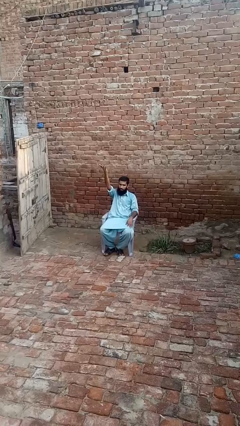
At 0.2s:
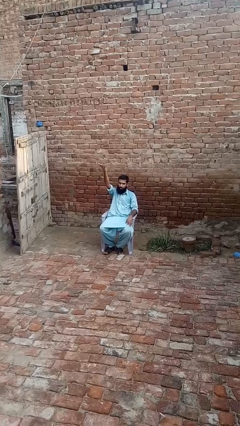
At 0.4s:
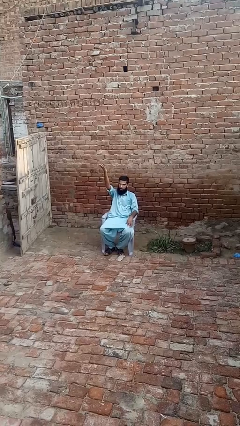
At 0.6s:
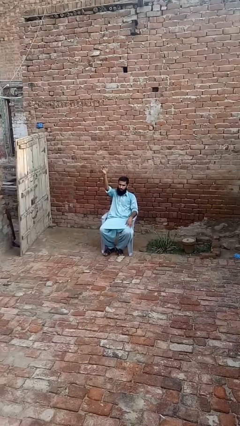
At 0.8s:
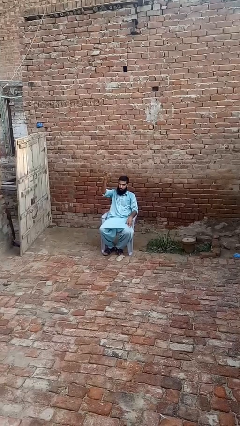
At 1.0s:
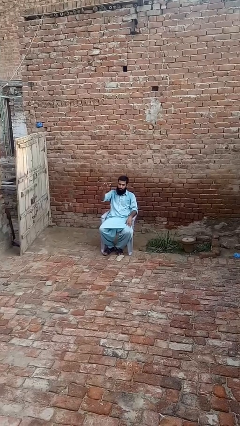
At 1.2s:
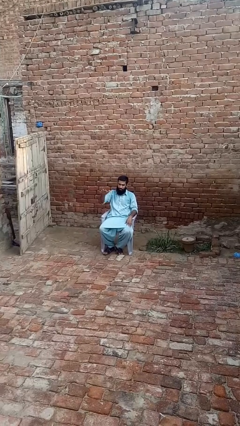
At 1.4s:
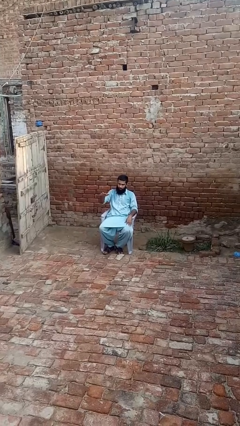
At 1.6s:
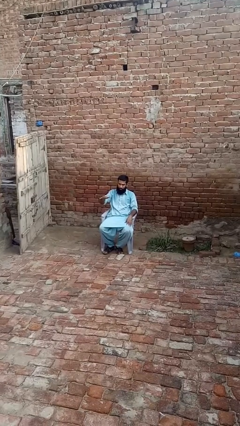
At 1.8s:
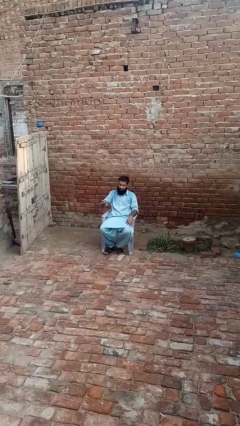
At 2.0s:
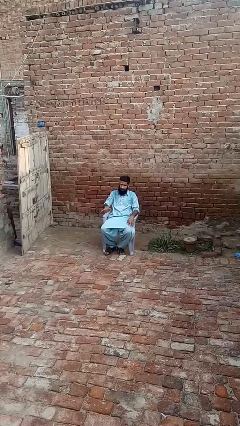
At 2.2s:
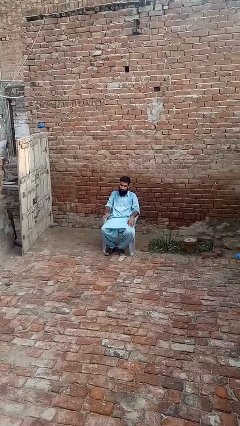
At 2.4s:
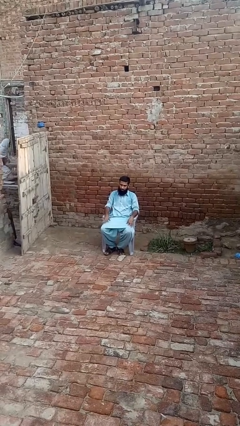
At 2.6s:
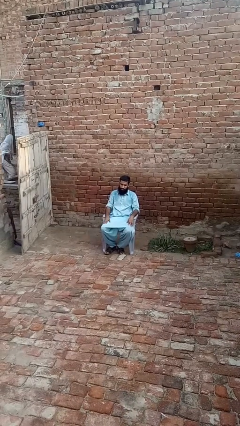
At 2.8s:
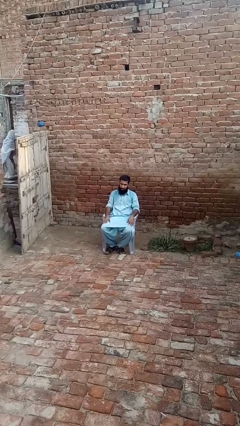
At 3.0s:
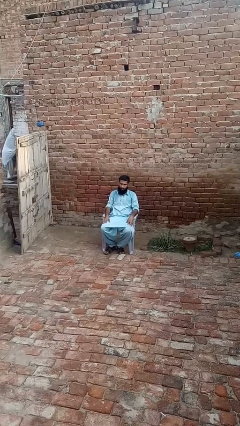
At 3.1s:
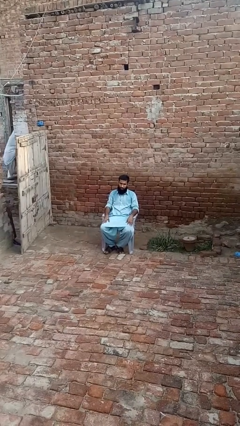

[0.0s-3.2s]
person gestures swipe down

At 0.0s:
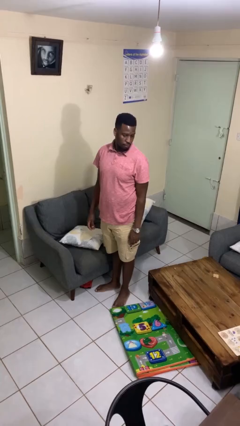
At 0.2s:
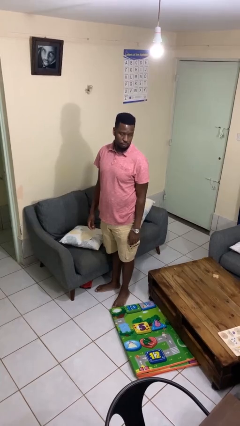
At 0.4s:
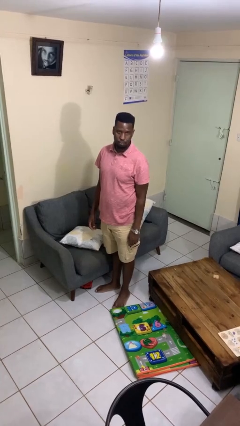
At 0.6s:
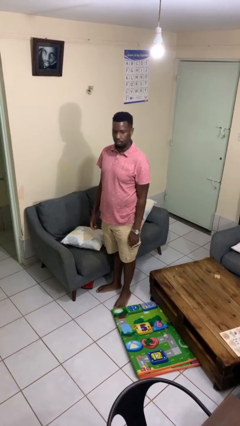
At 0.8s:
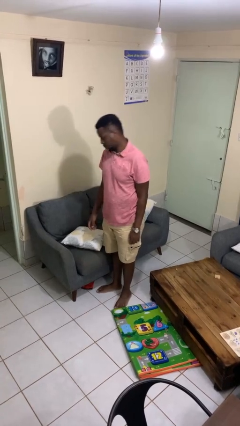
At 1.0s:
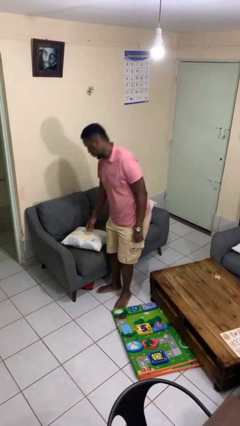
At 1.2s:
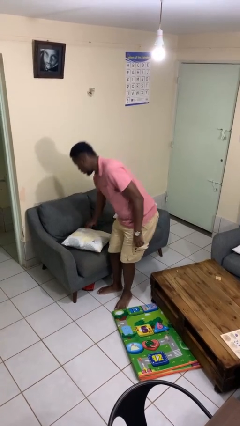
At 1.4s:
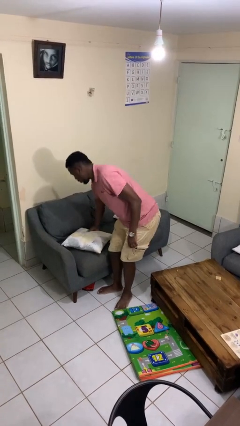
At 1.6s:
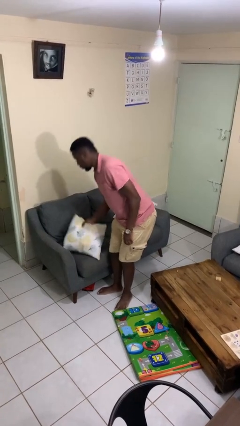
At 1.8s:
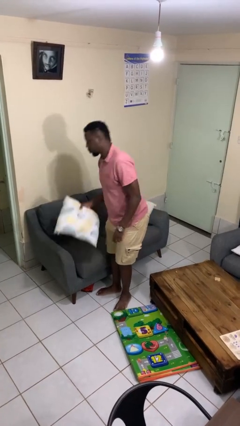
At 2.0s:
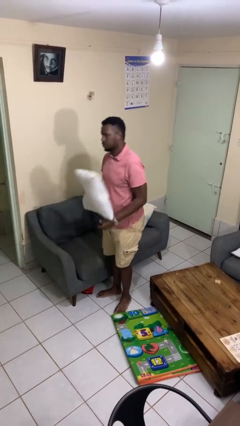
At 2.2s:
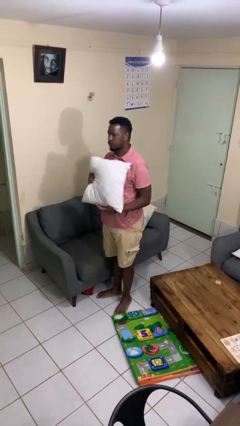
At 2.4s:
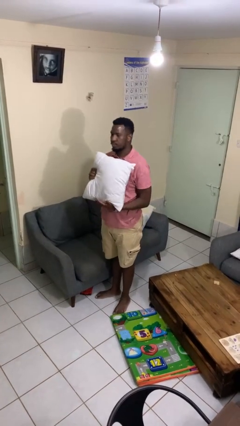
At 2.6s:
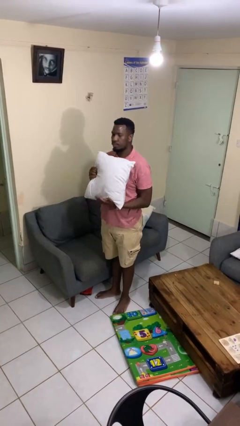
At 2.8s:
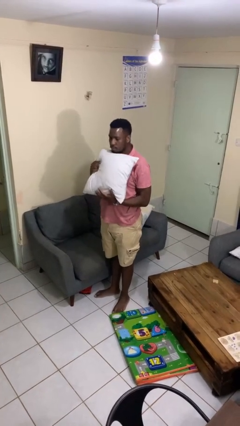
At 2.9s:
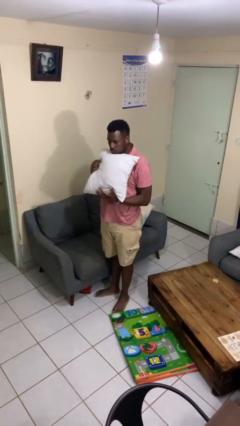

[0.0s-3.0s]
person picks up object from couch

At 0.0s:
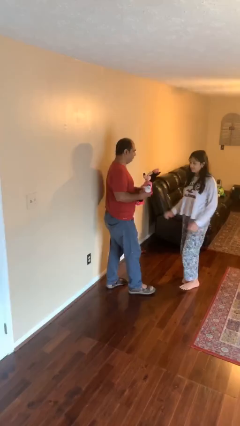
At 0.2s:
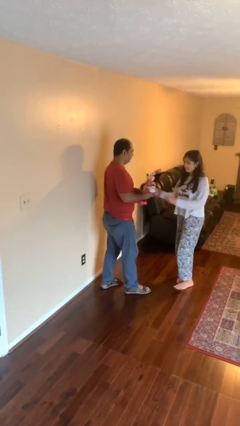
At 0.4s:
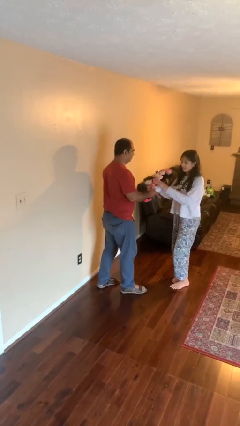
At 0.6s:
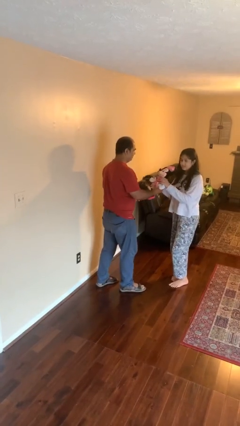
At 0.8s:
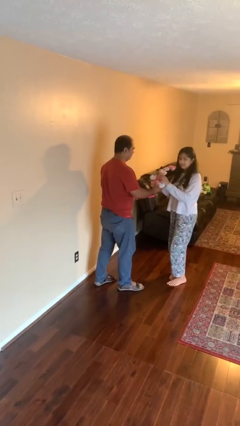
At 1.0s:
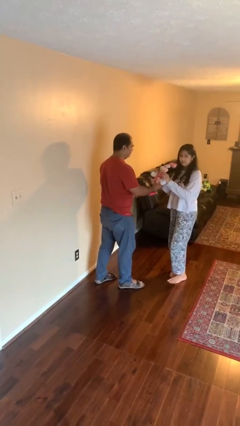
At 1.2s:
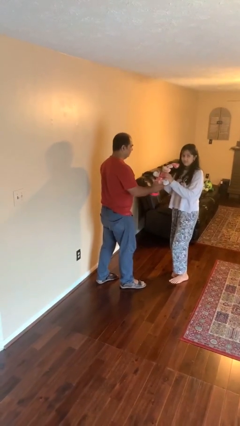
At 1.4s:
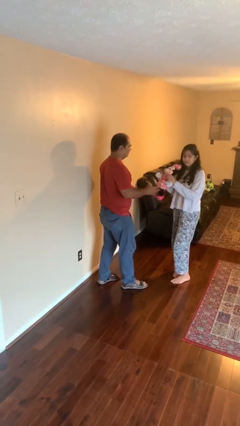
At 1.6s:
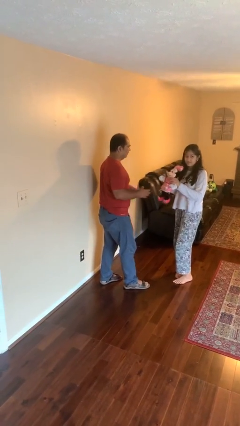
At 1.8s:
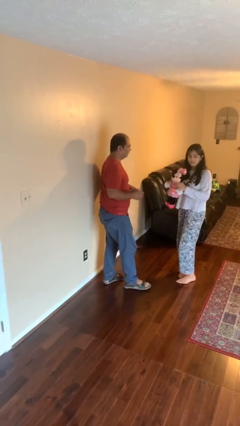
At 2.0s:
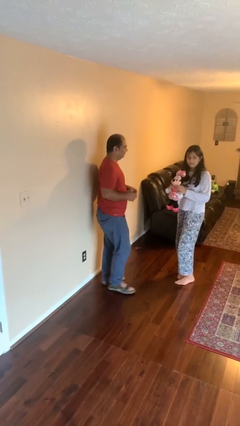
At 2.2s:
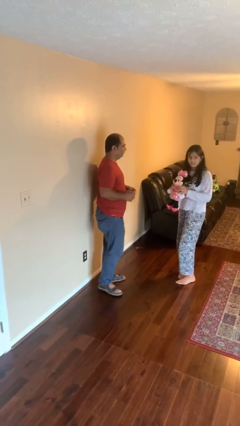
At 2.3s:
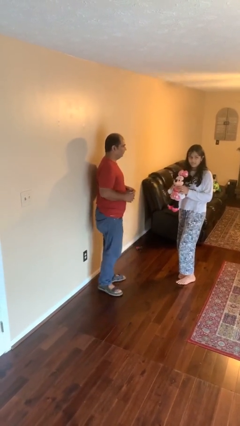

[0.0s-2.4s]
person transfers object to person

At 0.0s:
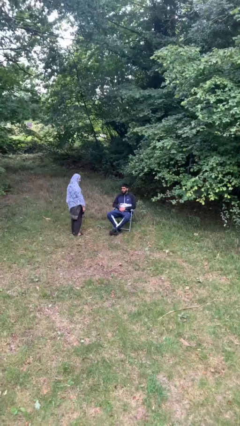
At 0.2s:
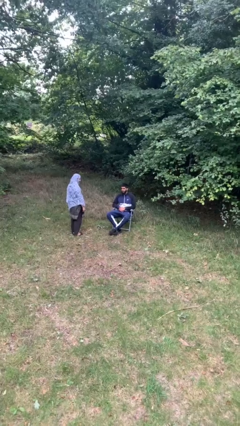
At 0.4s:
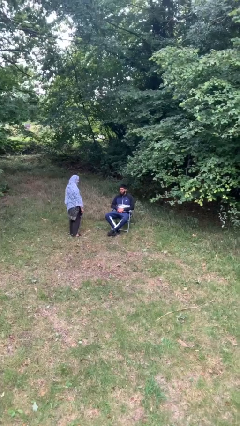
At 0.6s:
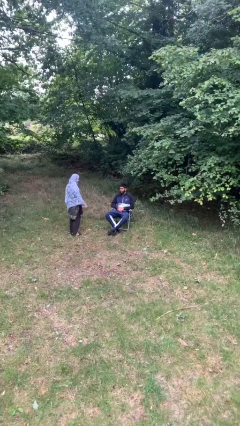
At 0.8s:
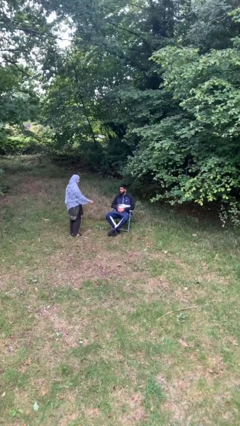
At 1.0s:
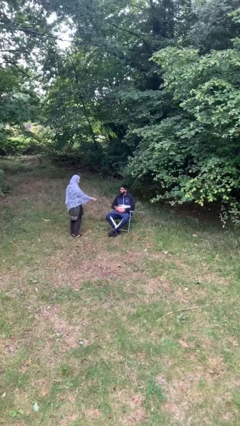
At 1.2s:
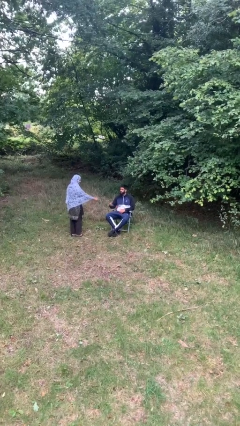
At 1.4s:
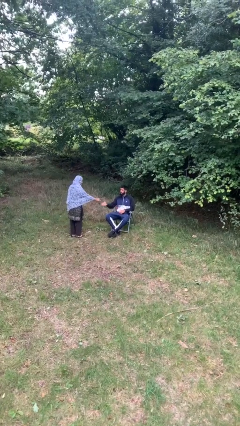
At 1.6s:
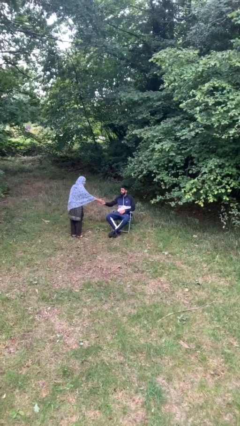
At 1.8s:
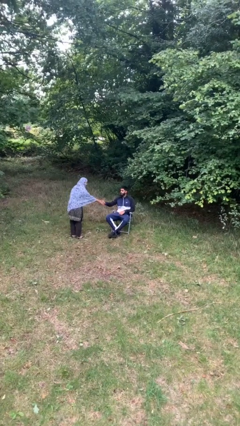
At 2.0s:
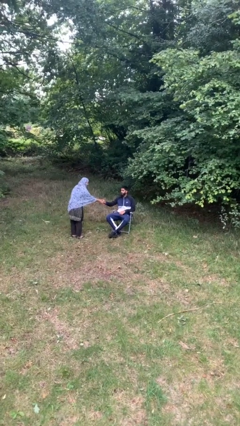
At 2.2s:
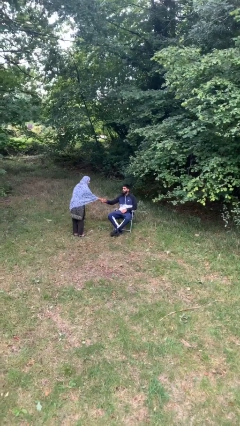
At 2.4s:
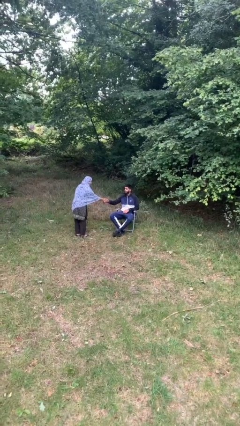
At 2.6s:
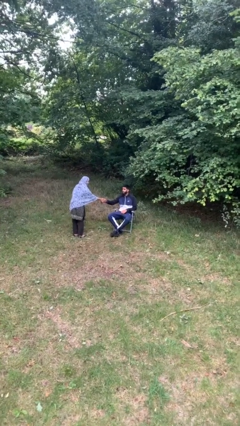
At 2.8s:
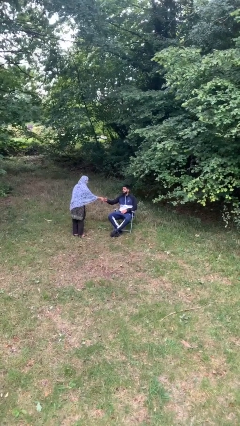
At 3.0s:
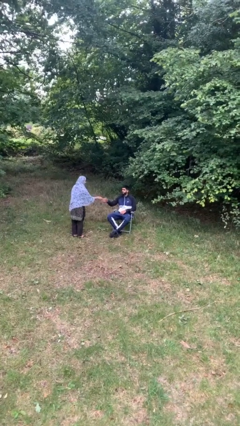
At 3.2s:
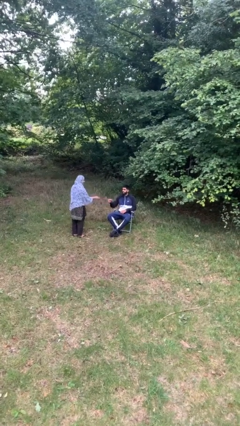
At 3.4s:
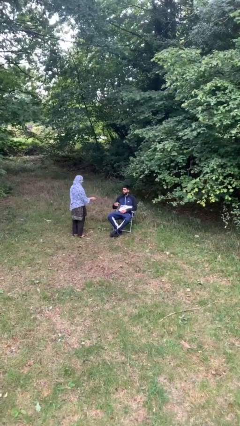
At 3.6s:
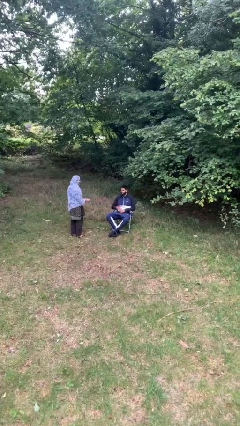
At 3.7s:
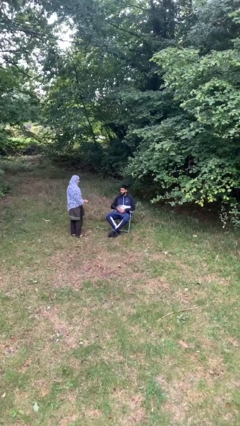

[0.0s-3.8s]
person shakes hand

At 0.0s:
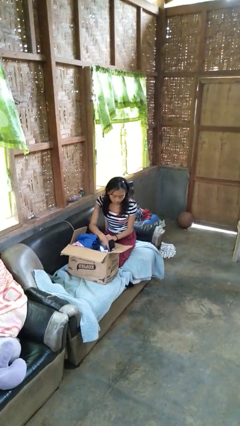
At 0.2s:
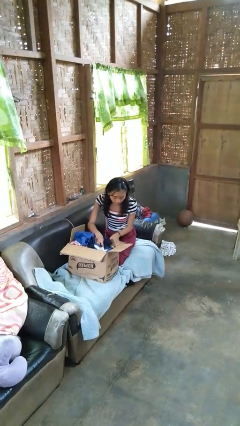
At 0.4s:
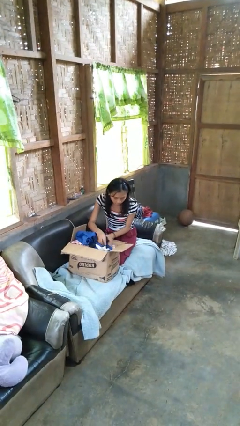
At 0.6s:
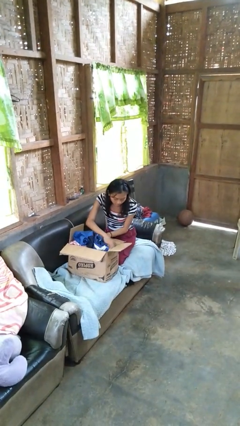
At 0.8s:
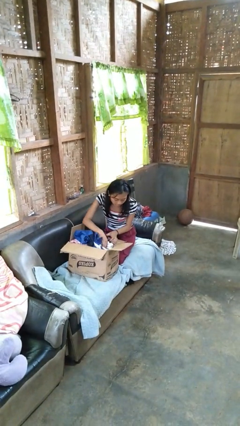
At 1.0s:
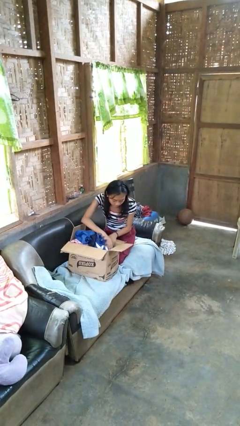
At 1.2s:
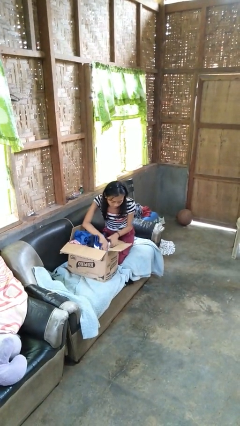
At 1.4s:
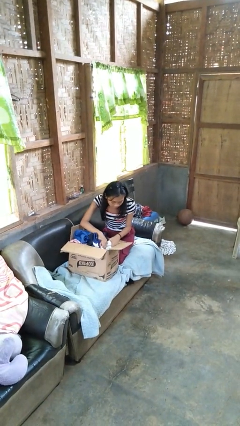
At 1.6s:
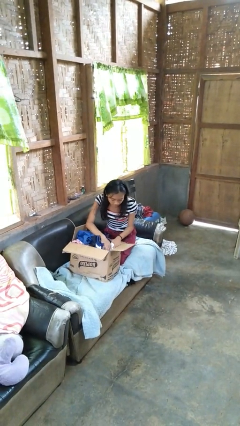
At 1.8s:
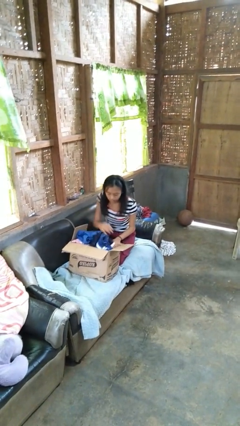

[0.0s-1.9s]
person searches in box

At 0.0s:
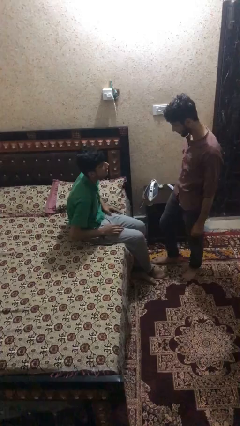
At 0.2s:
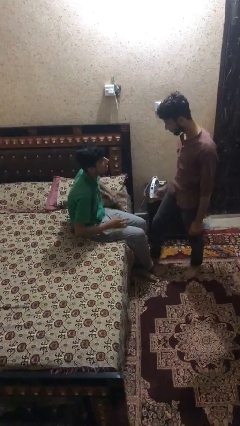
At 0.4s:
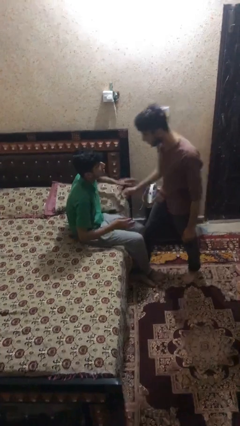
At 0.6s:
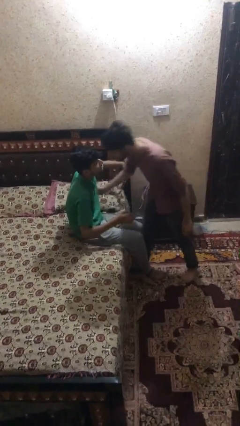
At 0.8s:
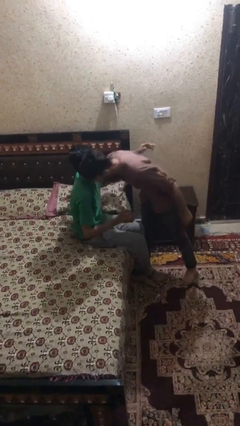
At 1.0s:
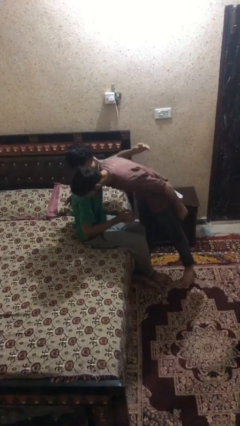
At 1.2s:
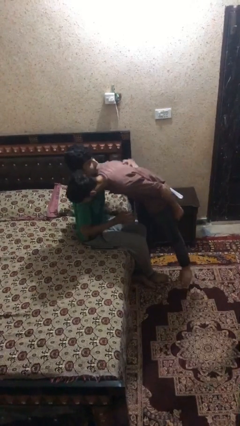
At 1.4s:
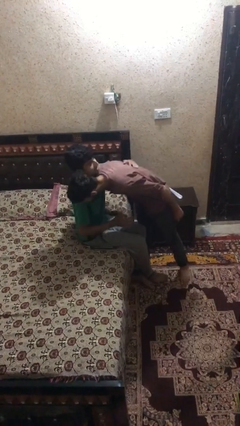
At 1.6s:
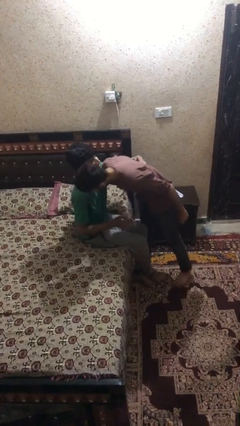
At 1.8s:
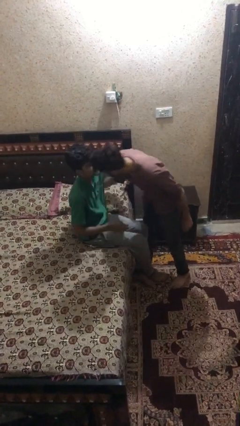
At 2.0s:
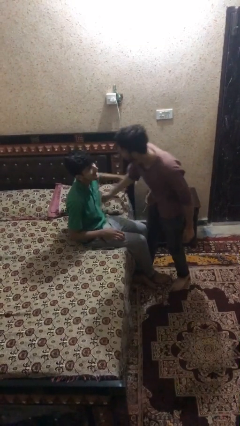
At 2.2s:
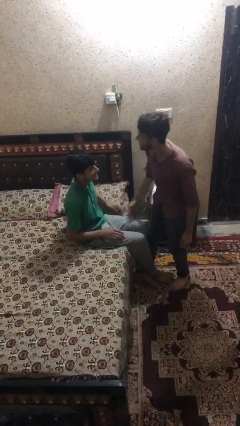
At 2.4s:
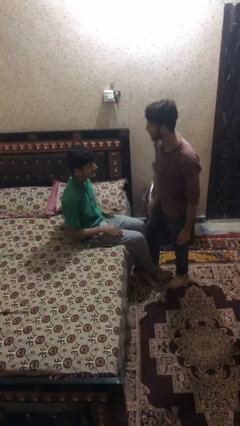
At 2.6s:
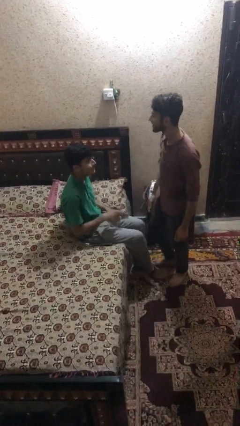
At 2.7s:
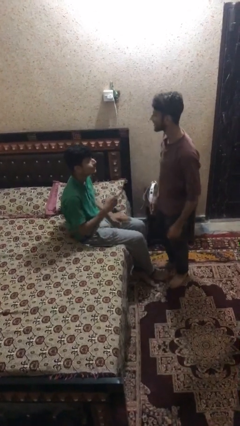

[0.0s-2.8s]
person embraces person

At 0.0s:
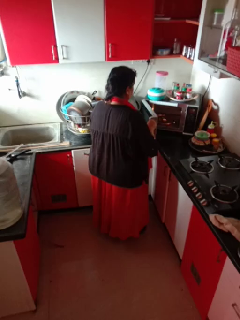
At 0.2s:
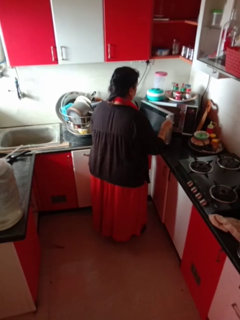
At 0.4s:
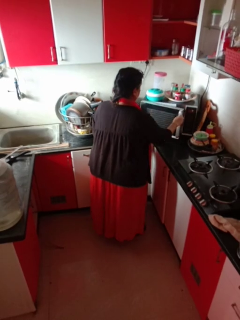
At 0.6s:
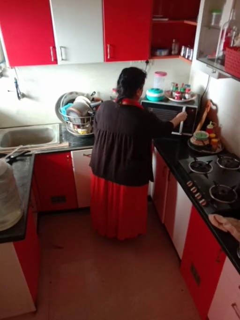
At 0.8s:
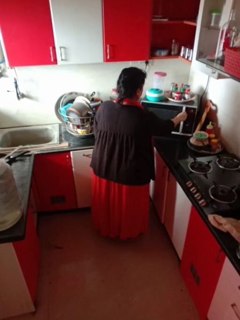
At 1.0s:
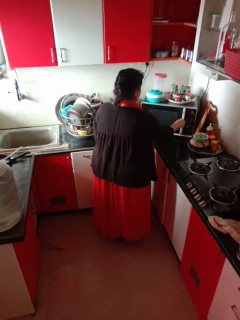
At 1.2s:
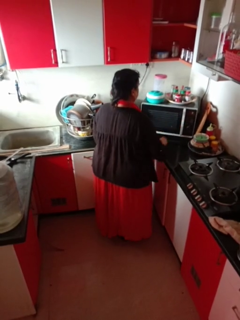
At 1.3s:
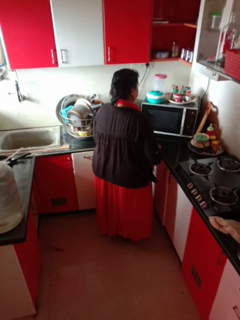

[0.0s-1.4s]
person closes microwave
